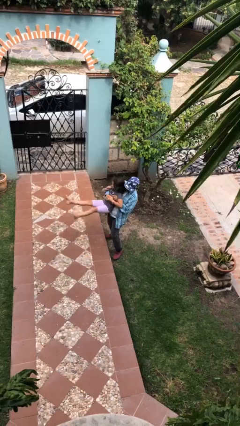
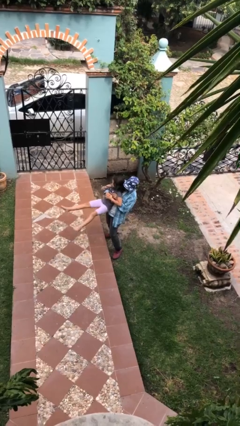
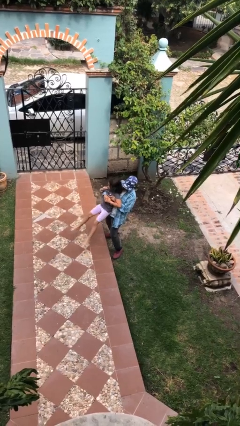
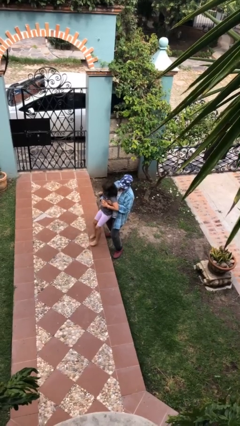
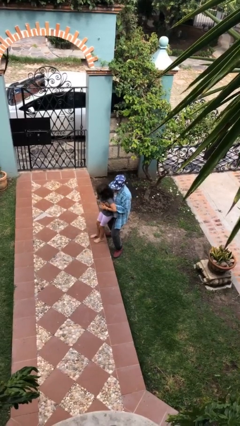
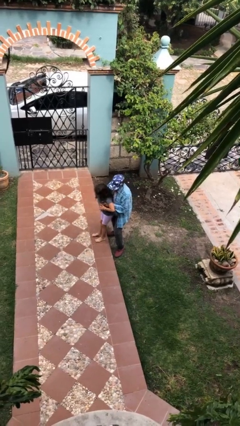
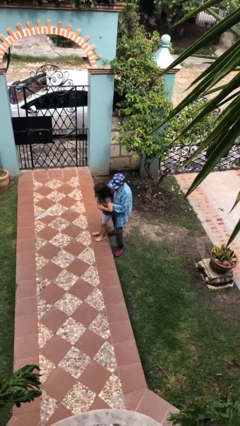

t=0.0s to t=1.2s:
person puts down person

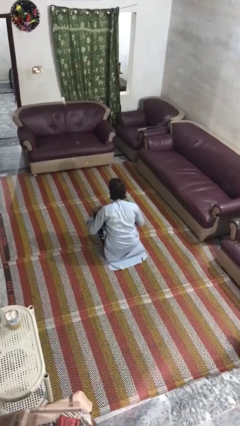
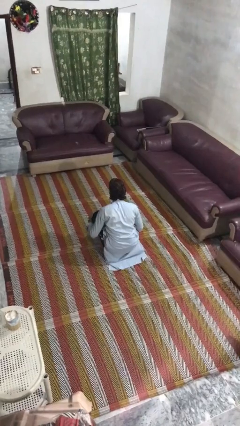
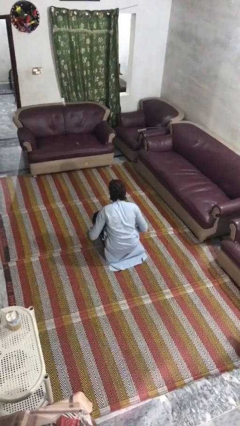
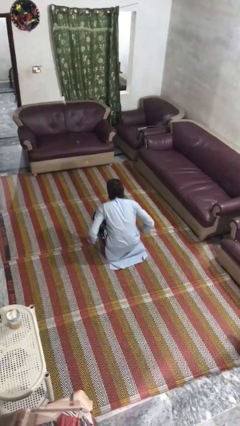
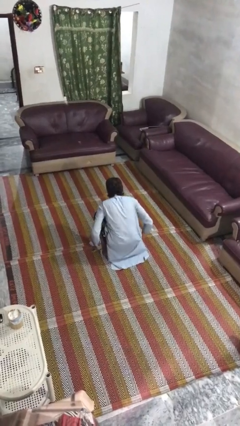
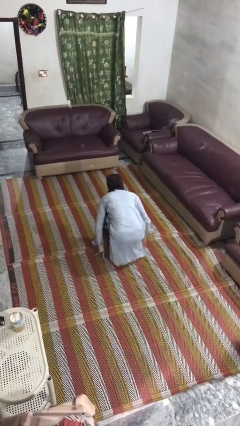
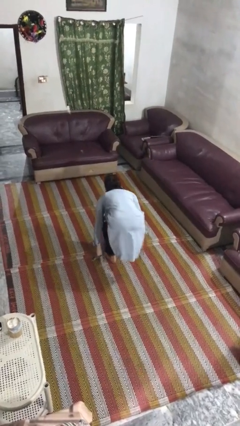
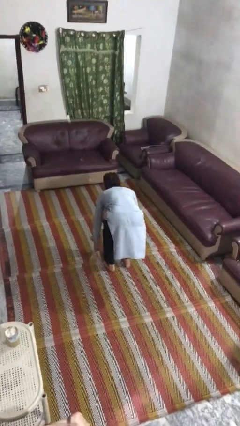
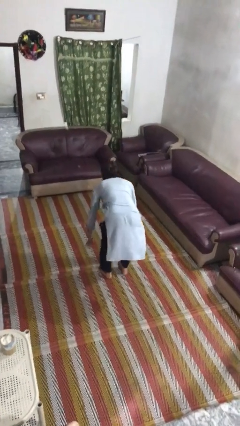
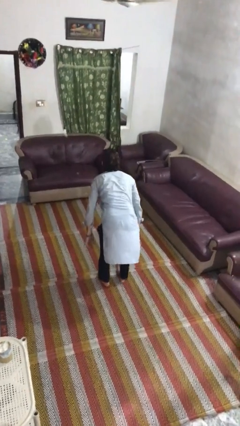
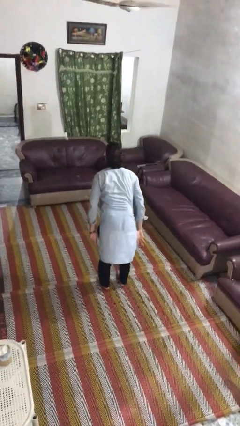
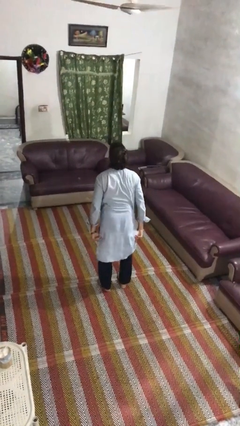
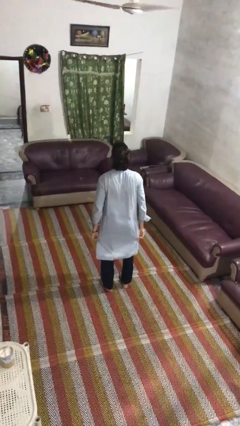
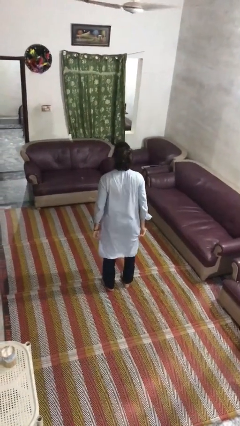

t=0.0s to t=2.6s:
person stands up

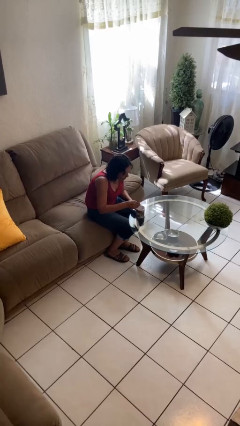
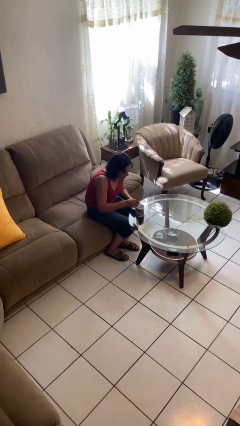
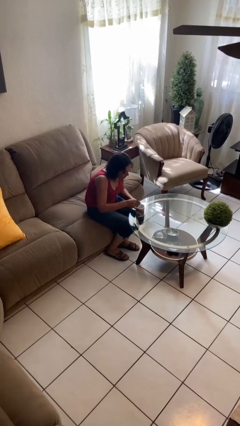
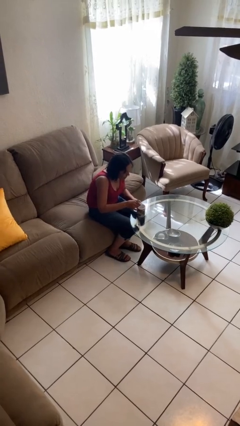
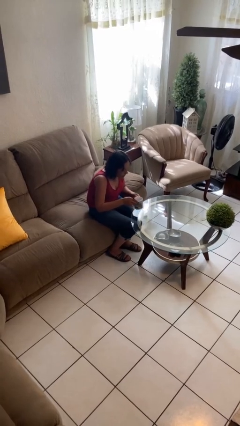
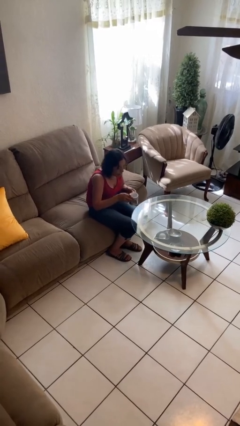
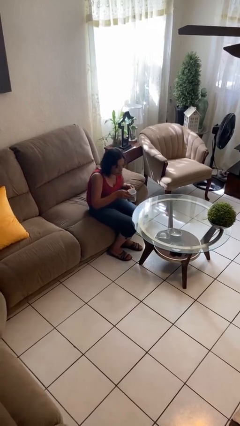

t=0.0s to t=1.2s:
person stirs mug

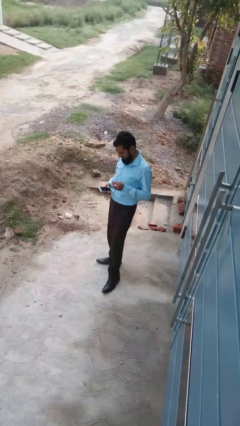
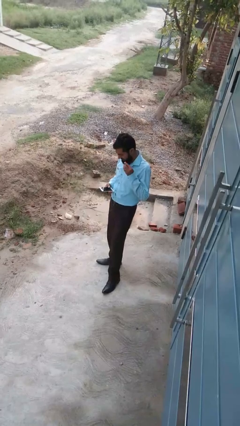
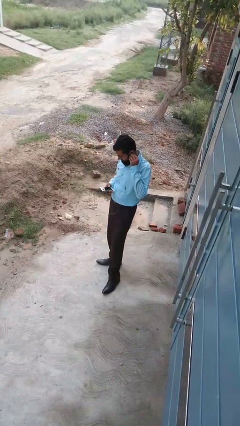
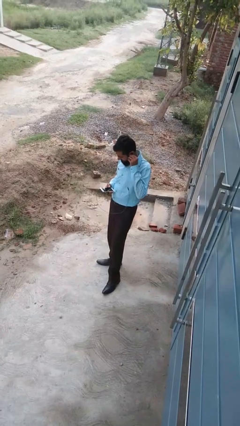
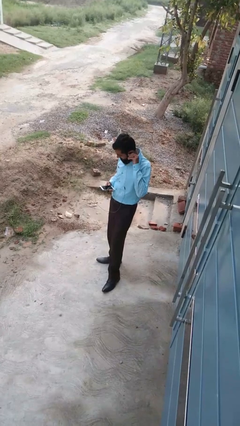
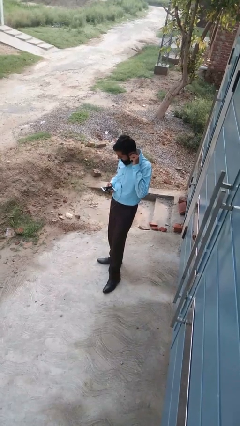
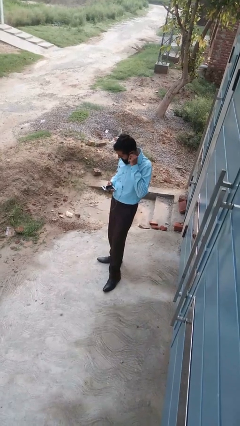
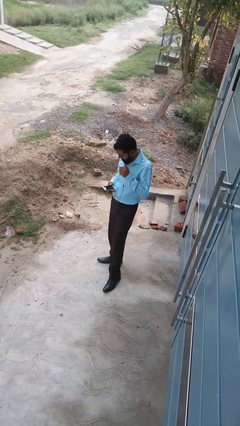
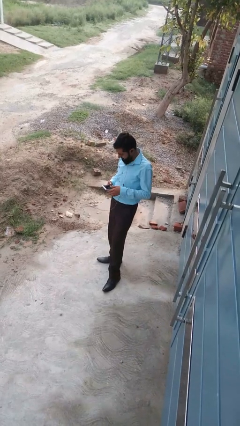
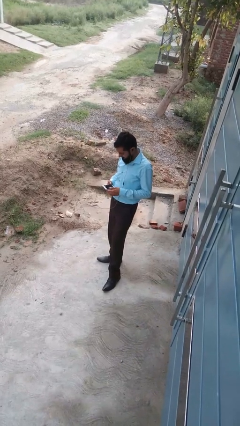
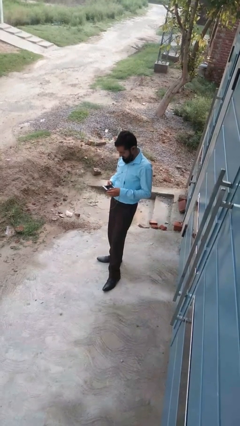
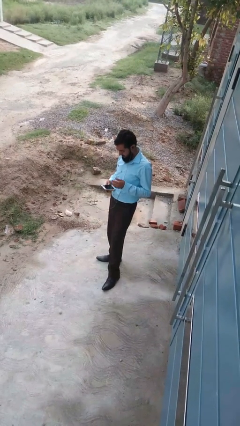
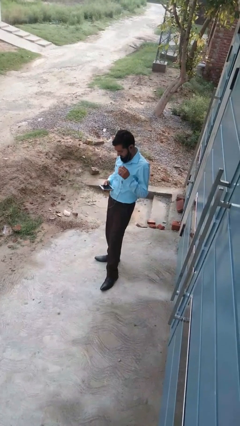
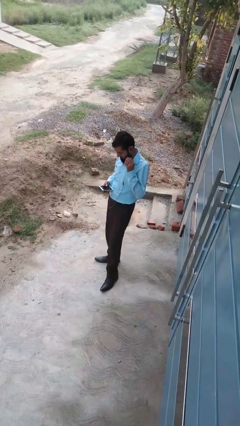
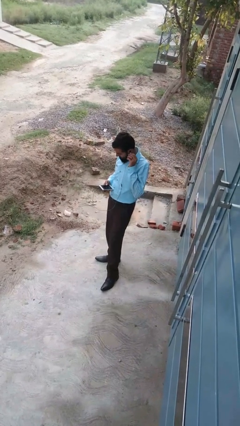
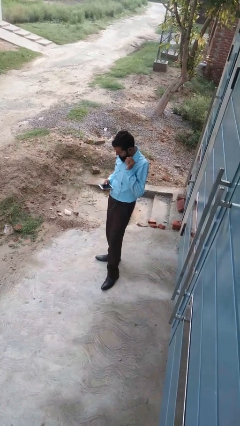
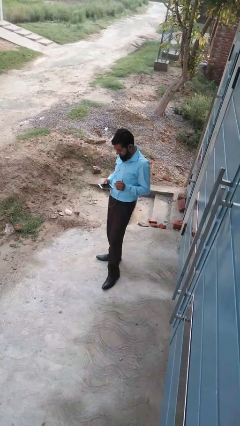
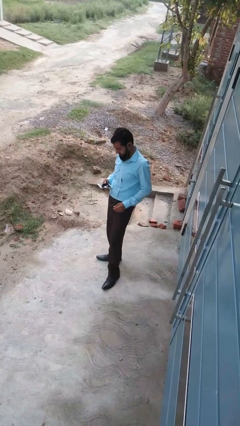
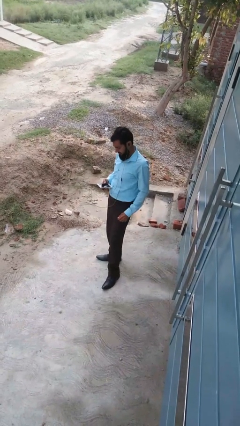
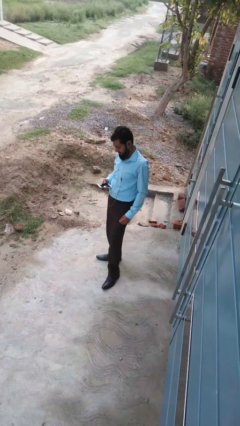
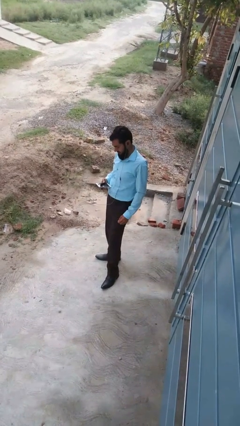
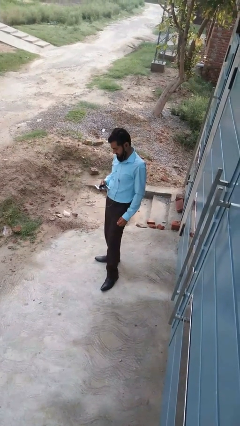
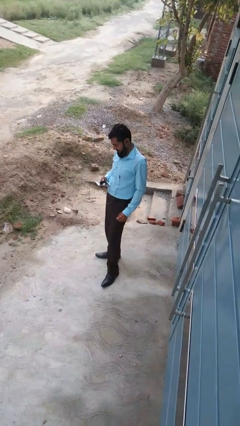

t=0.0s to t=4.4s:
person puts on headphones

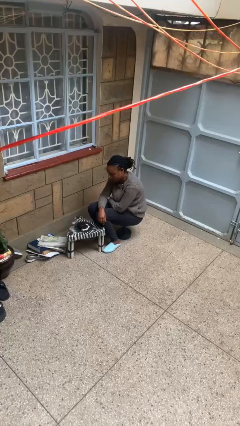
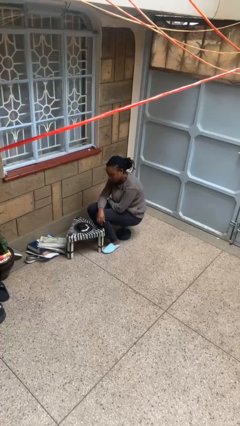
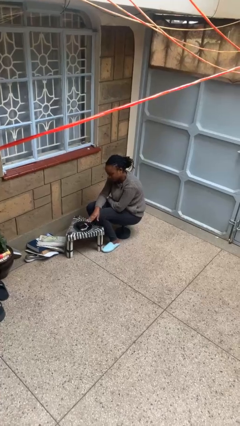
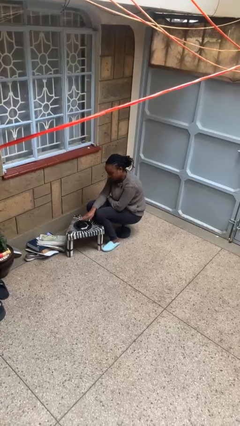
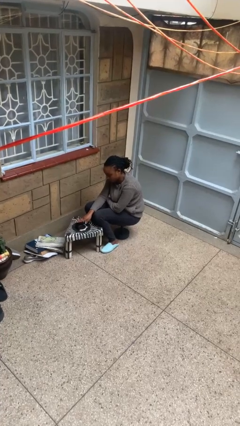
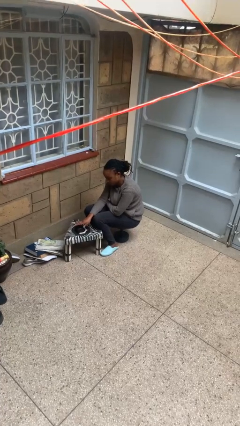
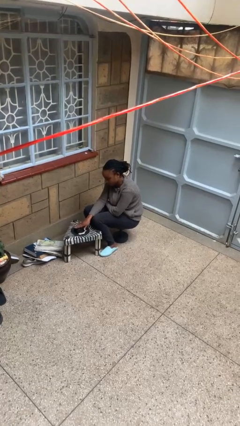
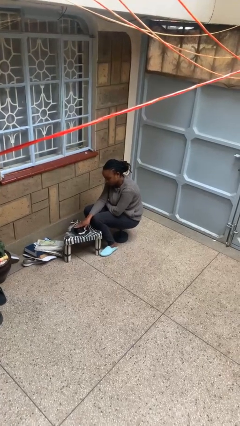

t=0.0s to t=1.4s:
person taps object with finger

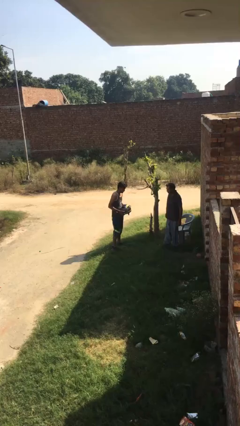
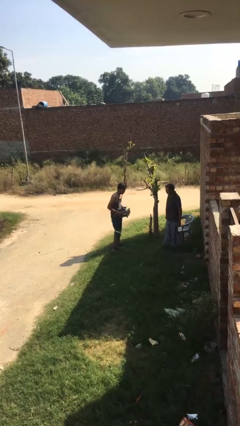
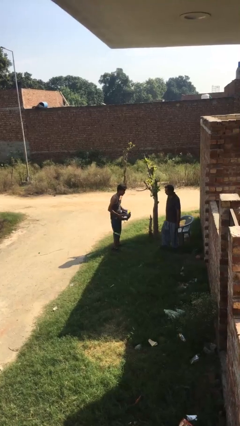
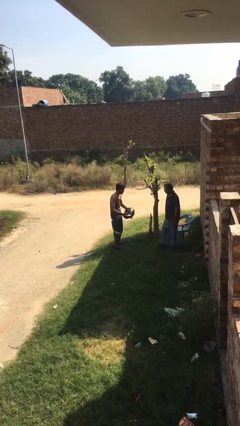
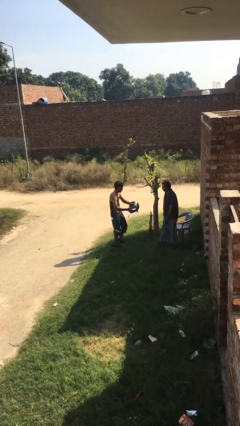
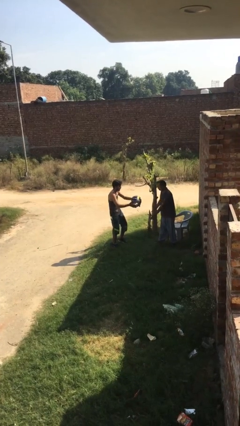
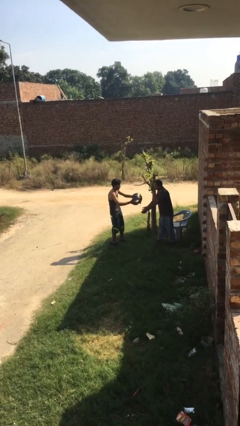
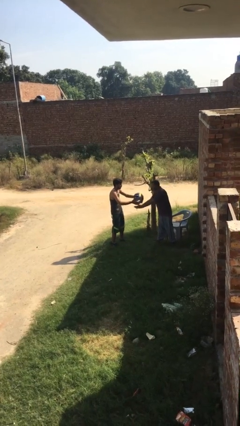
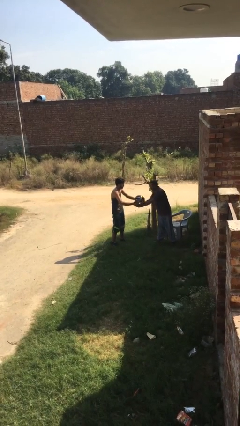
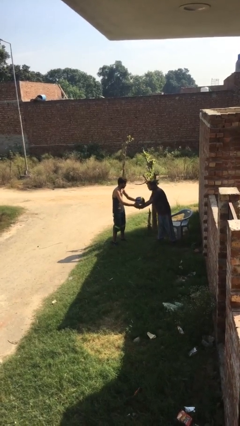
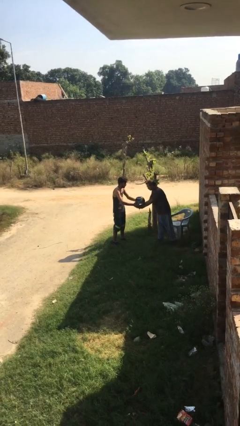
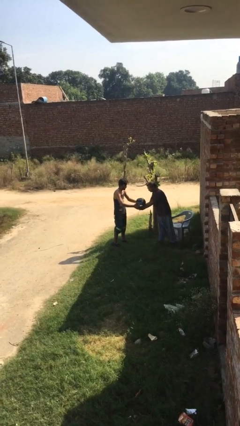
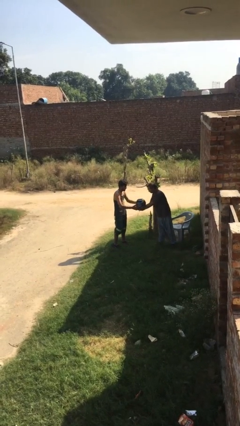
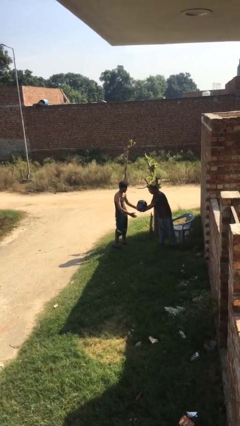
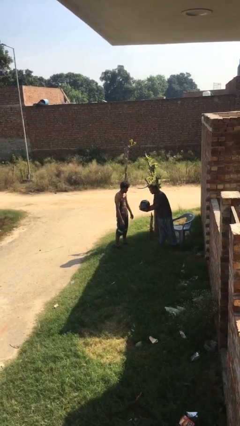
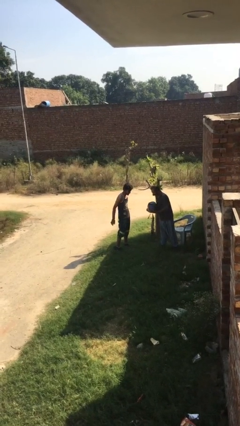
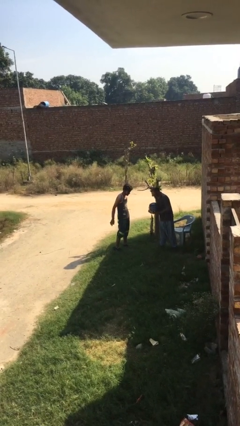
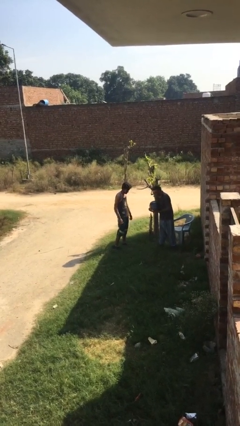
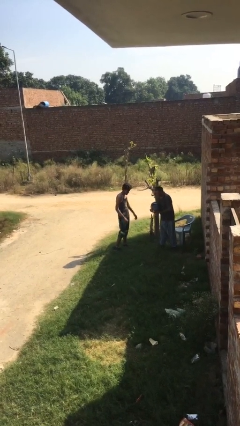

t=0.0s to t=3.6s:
person transfers object to person

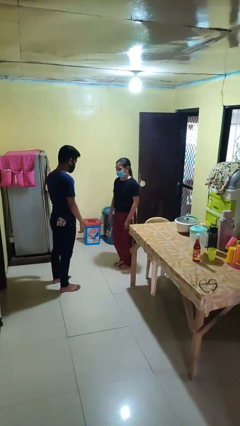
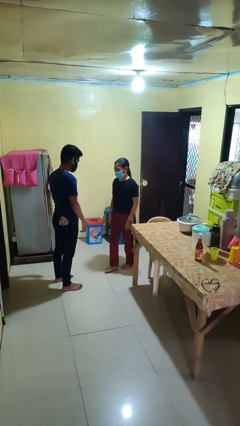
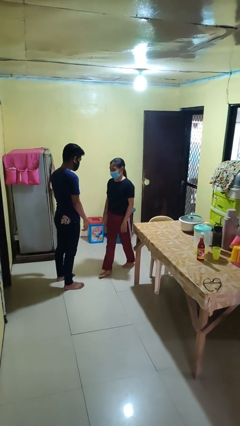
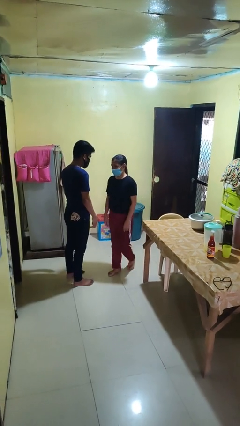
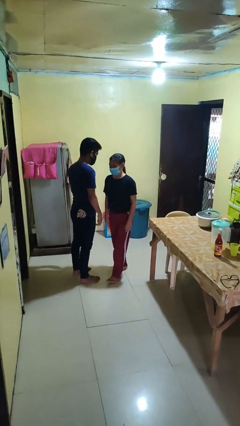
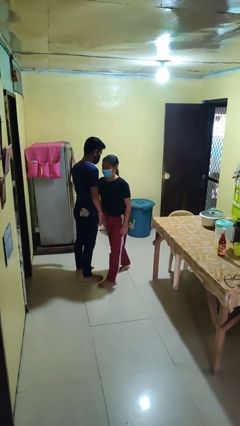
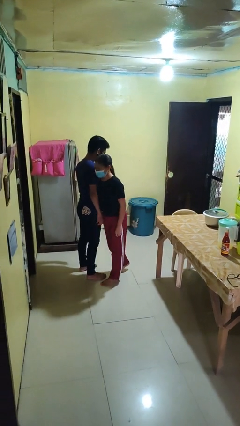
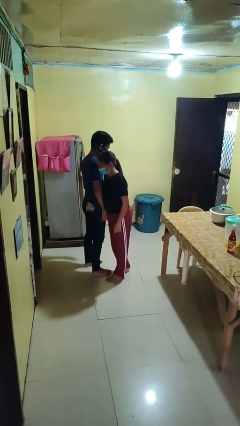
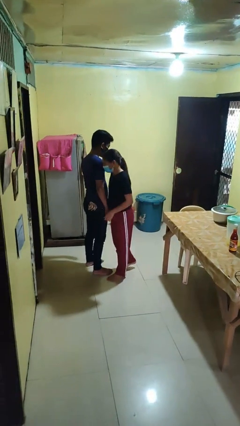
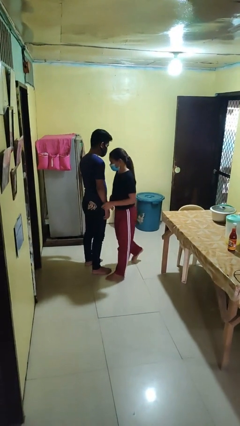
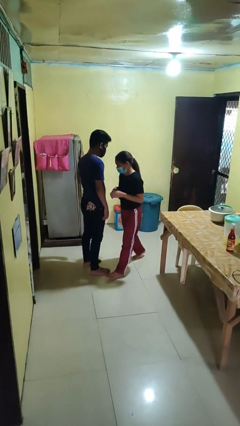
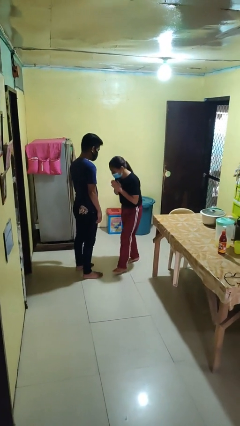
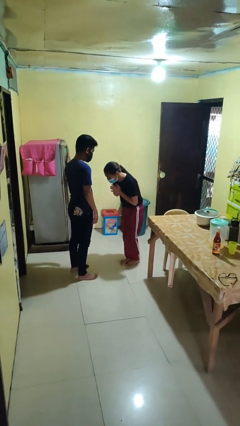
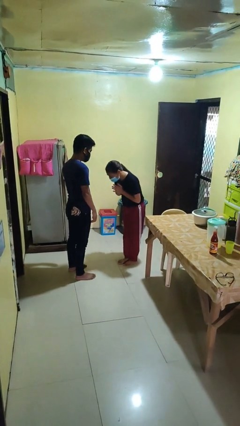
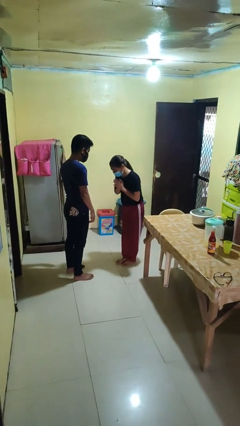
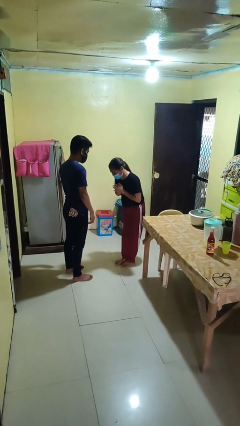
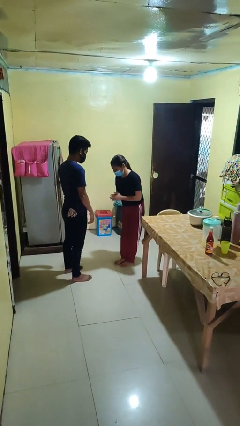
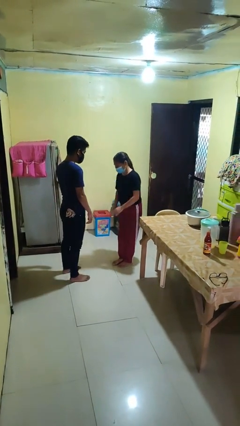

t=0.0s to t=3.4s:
person bumps into person
